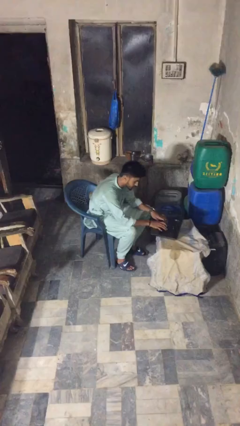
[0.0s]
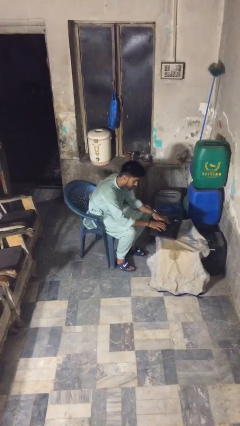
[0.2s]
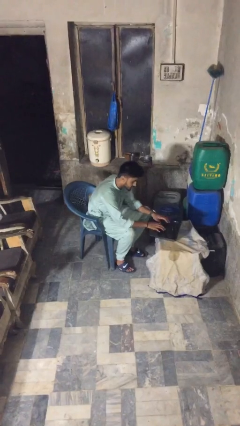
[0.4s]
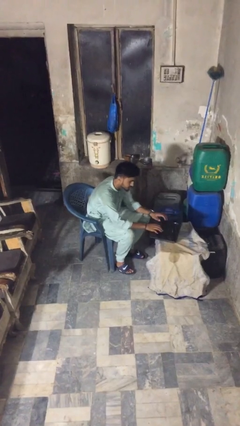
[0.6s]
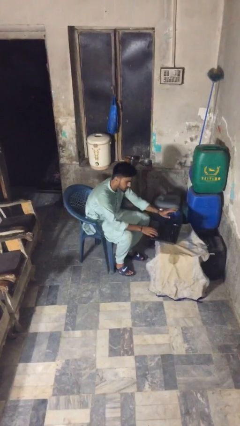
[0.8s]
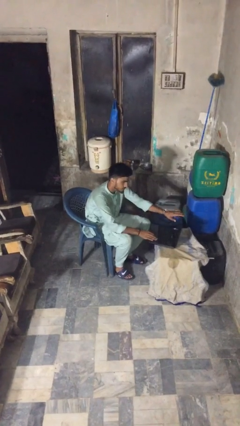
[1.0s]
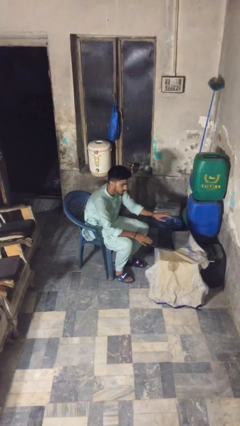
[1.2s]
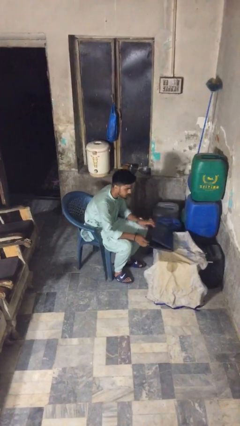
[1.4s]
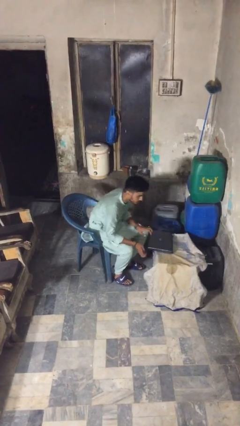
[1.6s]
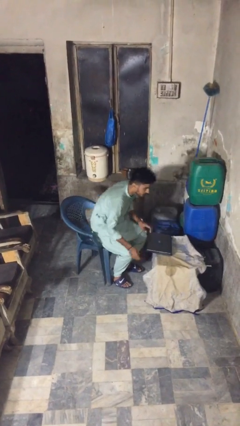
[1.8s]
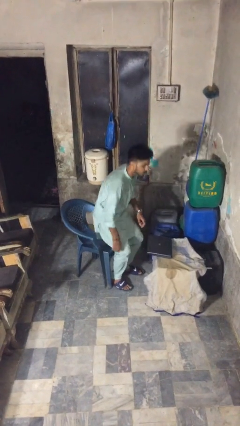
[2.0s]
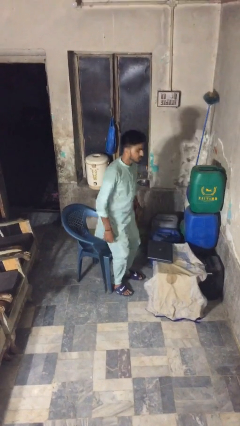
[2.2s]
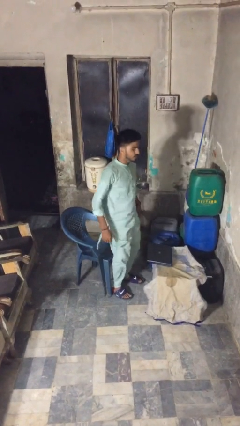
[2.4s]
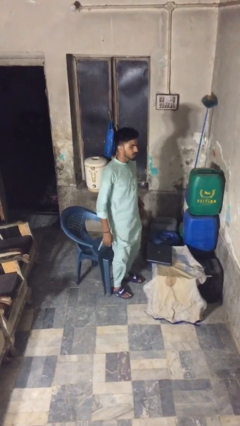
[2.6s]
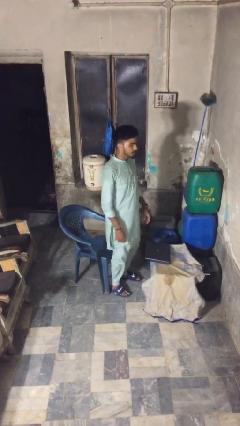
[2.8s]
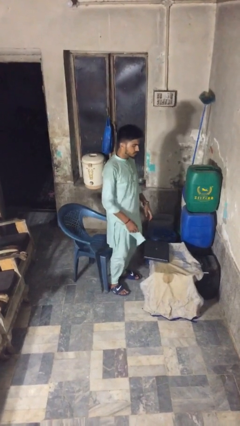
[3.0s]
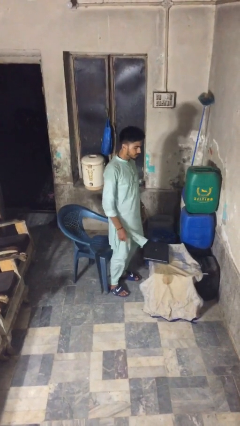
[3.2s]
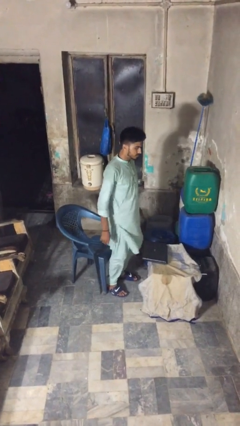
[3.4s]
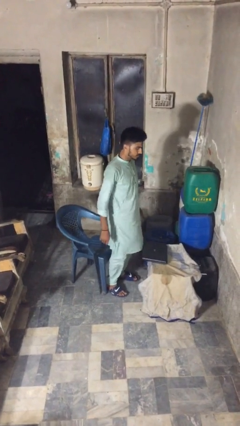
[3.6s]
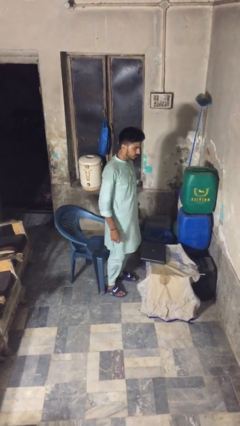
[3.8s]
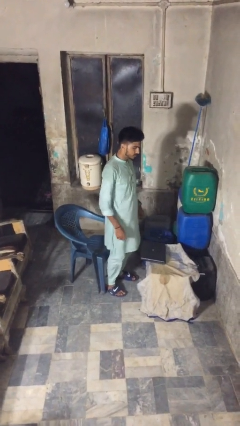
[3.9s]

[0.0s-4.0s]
person stands up

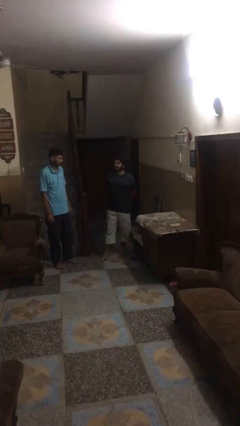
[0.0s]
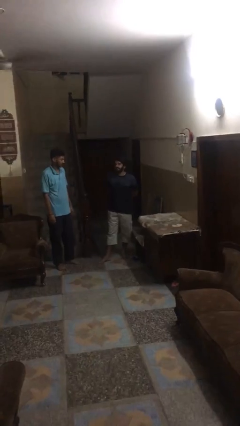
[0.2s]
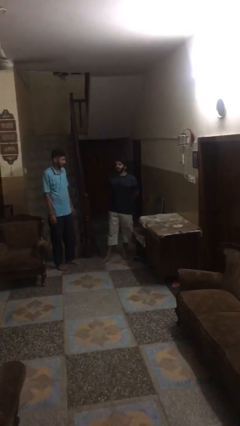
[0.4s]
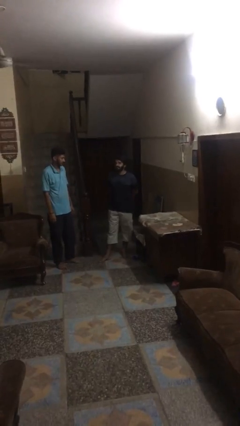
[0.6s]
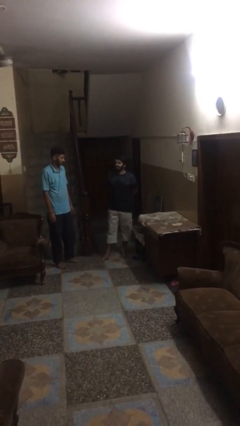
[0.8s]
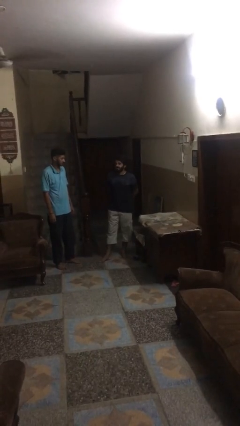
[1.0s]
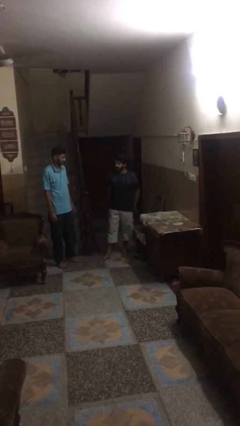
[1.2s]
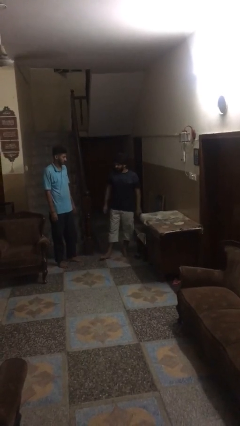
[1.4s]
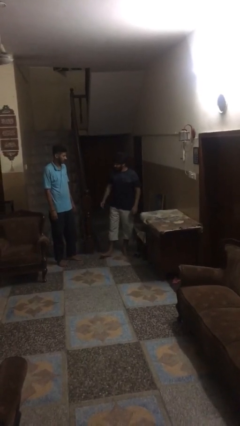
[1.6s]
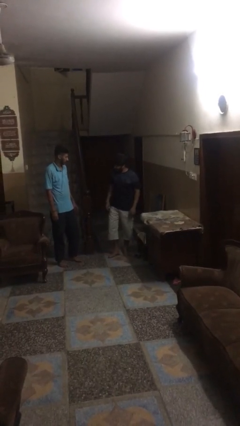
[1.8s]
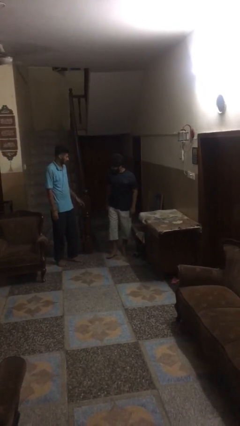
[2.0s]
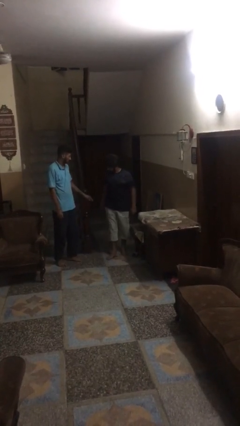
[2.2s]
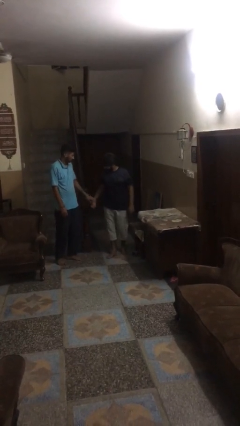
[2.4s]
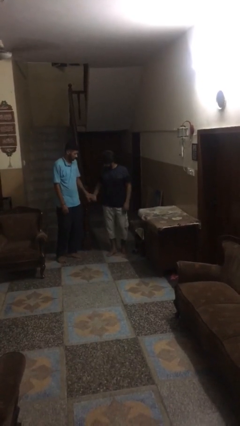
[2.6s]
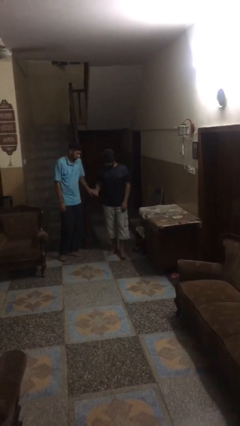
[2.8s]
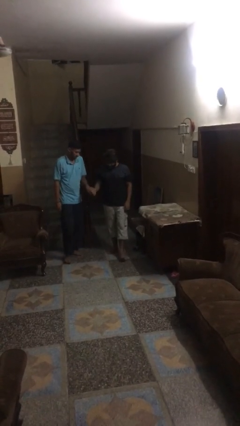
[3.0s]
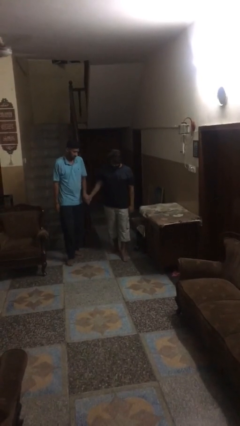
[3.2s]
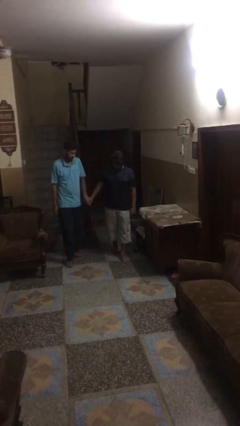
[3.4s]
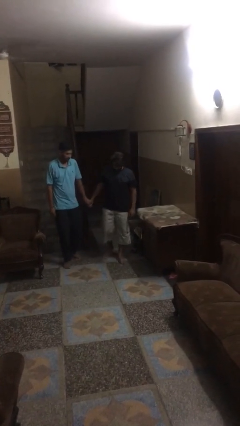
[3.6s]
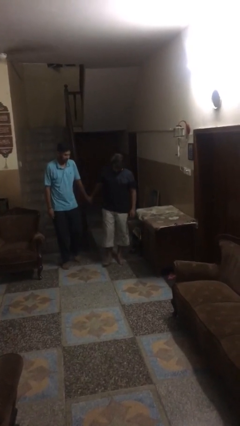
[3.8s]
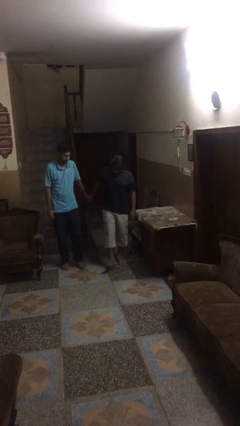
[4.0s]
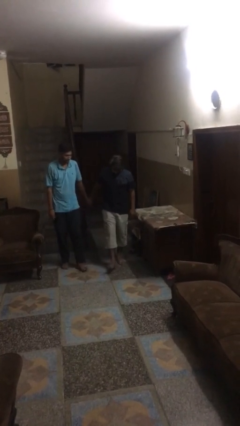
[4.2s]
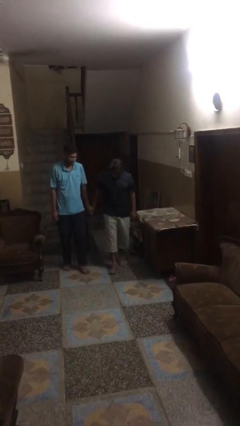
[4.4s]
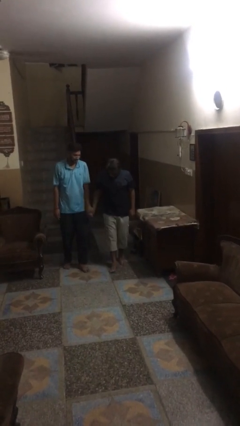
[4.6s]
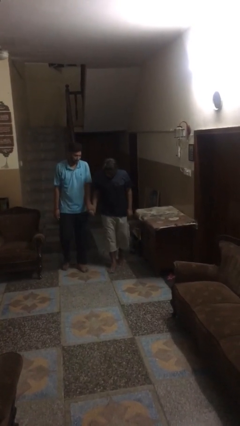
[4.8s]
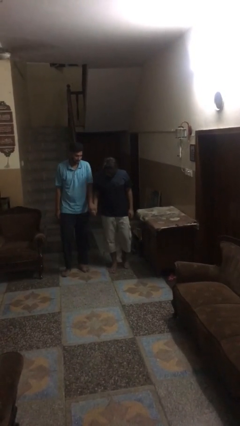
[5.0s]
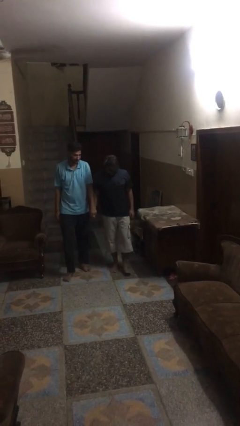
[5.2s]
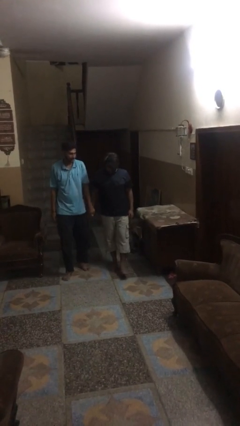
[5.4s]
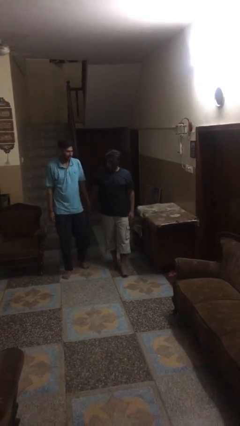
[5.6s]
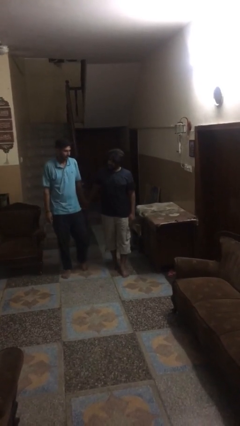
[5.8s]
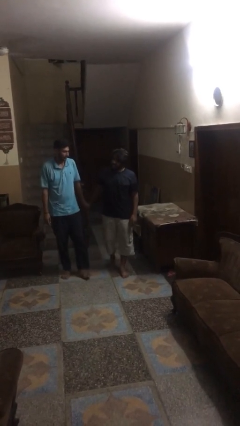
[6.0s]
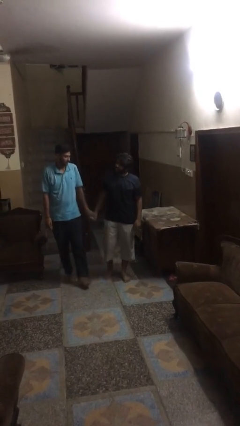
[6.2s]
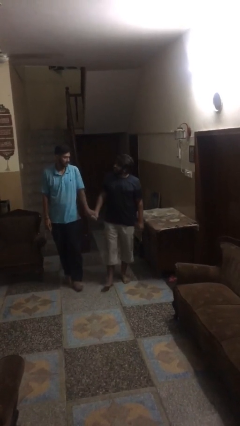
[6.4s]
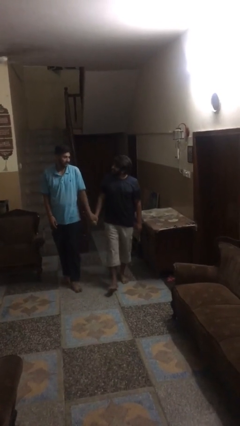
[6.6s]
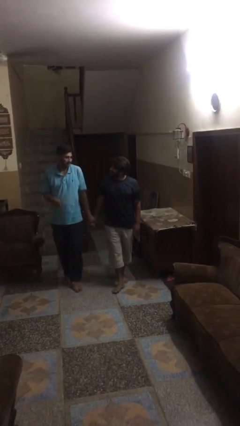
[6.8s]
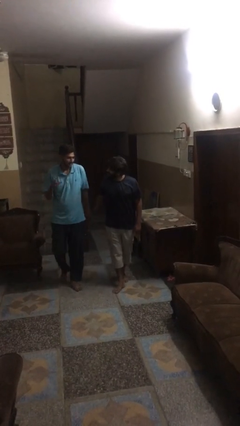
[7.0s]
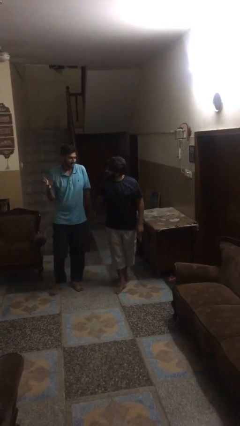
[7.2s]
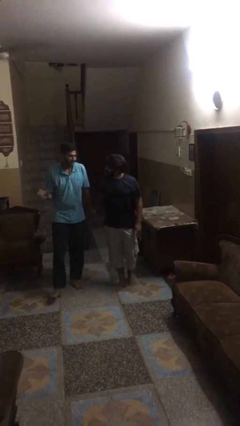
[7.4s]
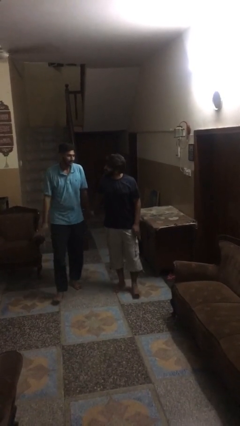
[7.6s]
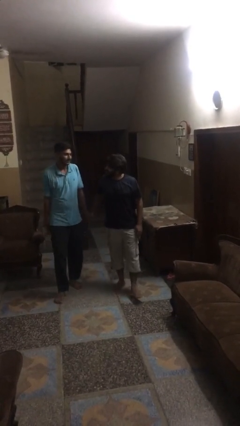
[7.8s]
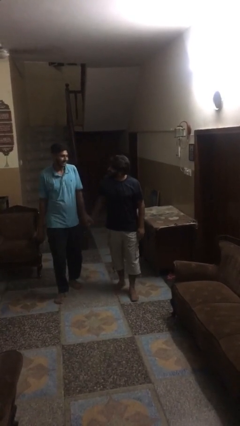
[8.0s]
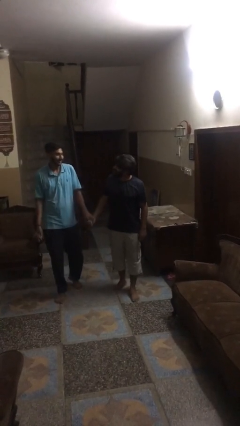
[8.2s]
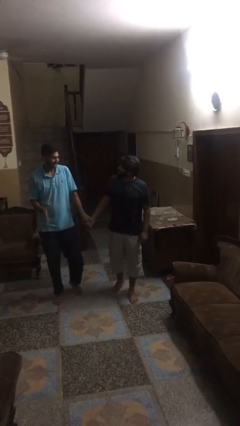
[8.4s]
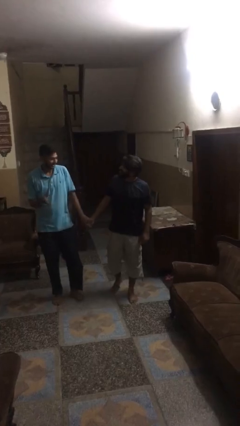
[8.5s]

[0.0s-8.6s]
person holds hand

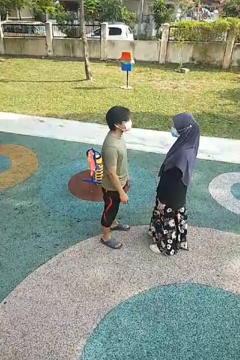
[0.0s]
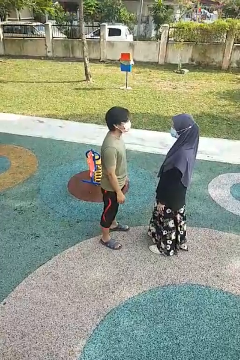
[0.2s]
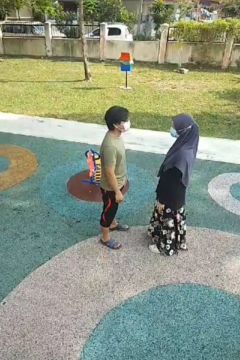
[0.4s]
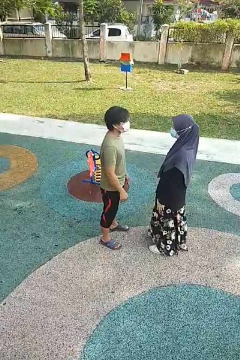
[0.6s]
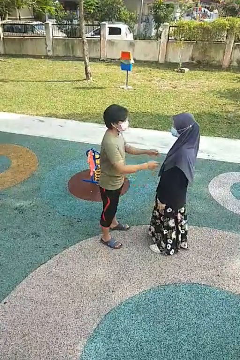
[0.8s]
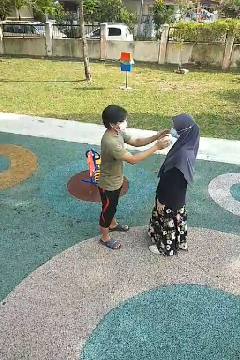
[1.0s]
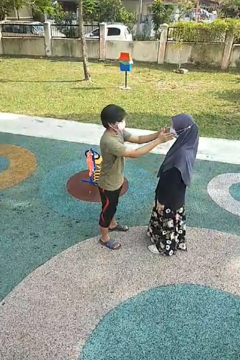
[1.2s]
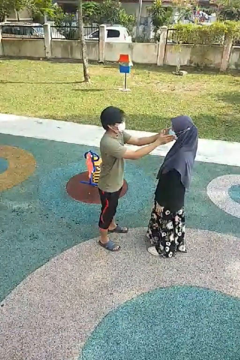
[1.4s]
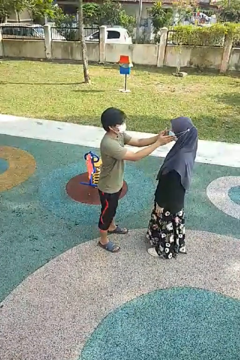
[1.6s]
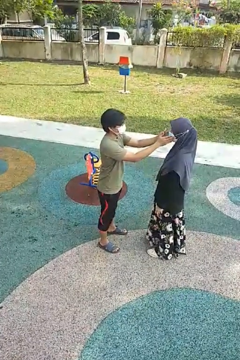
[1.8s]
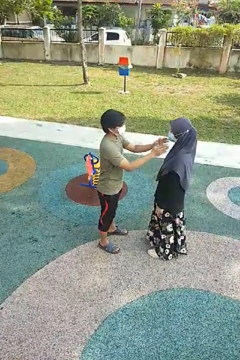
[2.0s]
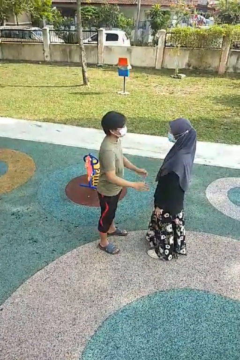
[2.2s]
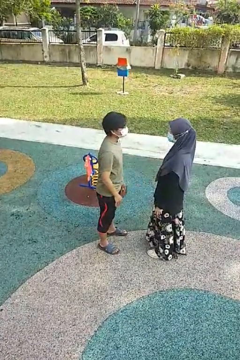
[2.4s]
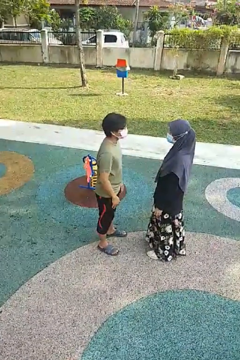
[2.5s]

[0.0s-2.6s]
person touches face of person

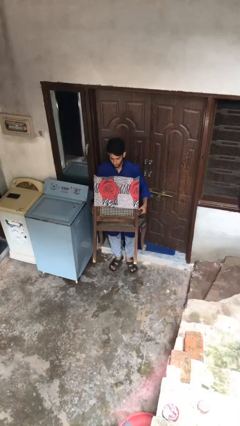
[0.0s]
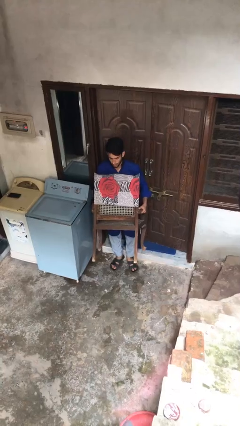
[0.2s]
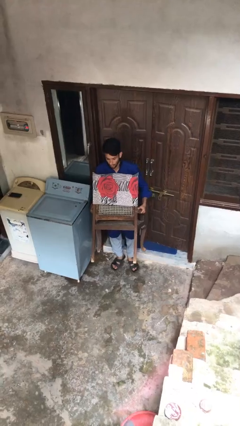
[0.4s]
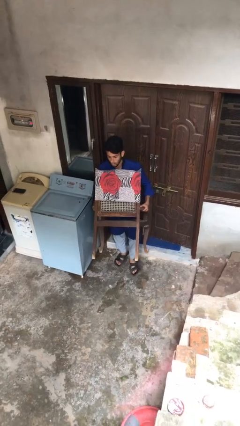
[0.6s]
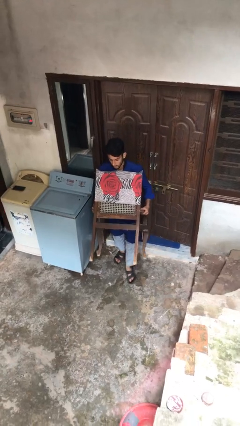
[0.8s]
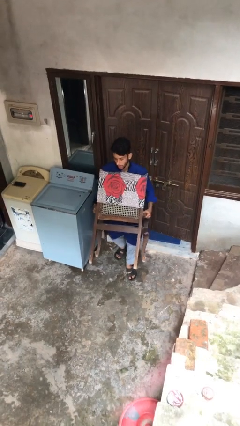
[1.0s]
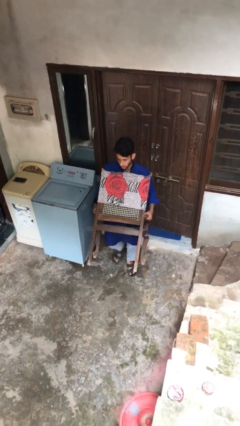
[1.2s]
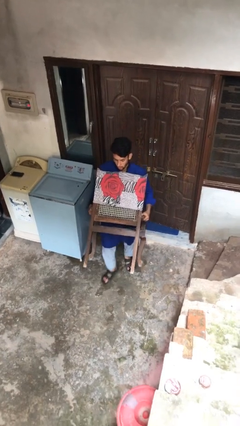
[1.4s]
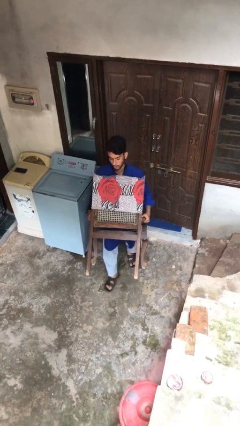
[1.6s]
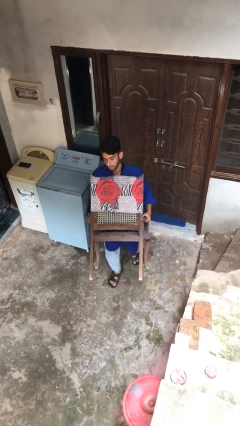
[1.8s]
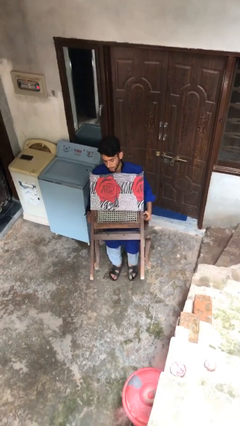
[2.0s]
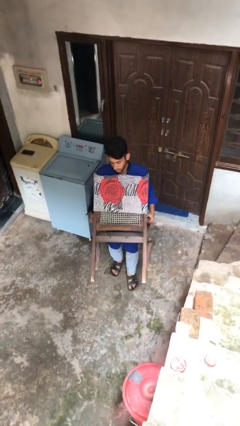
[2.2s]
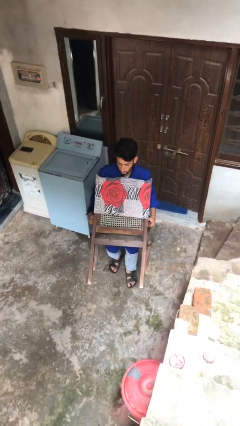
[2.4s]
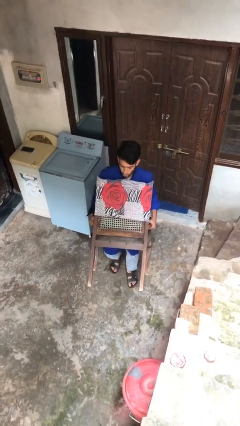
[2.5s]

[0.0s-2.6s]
person carries heavy object

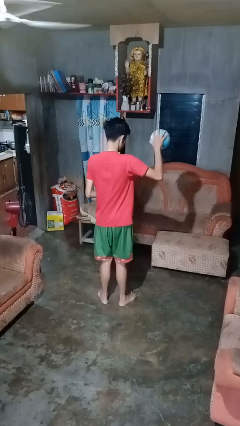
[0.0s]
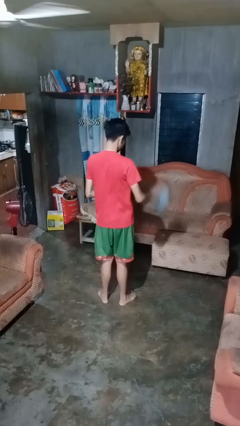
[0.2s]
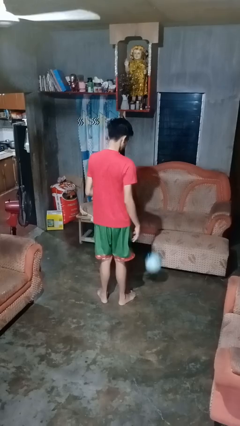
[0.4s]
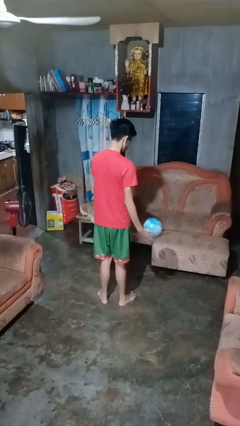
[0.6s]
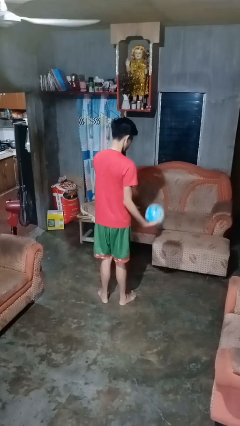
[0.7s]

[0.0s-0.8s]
person bounces ball on floor
